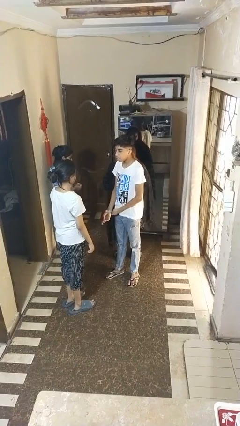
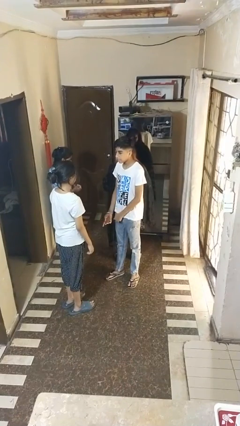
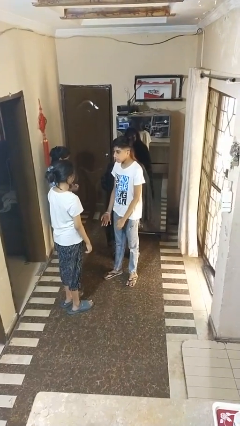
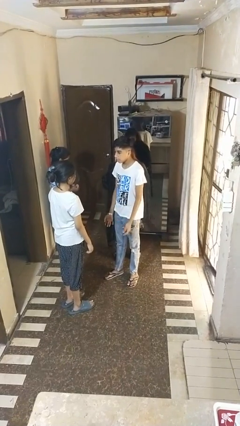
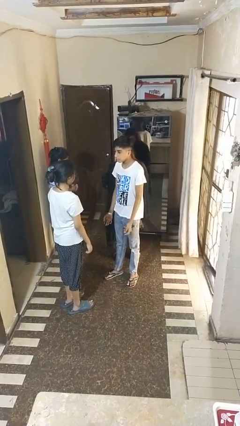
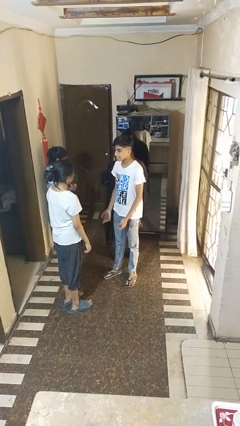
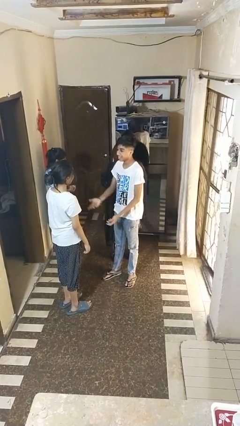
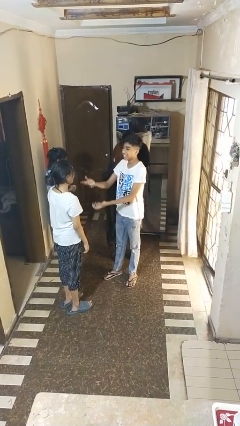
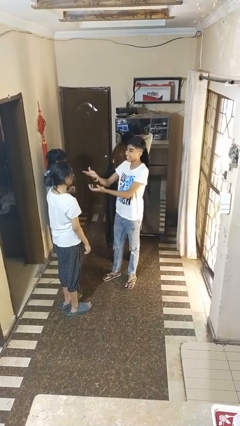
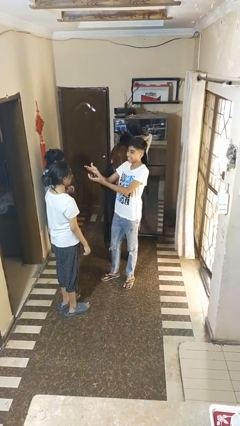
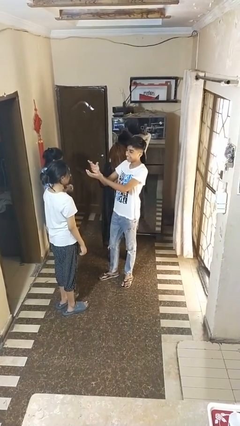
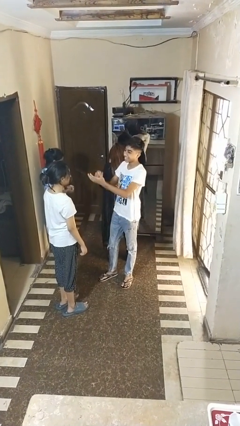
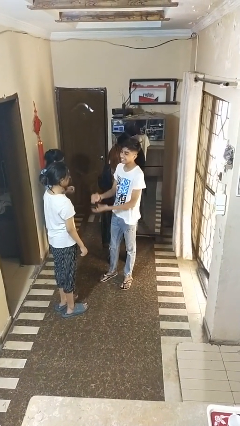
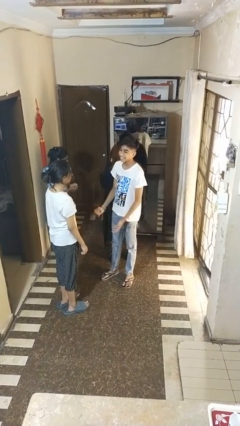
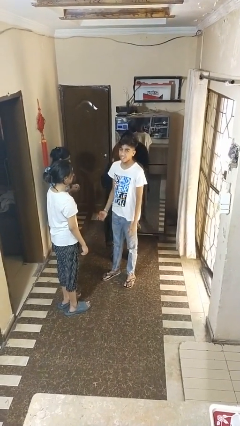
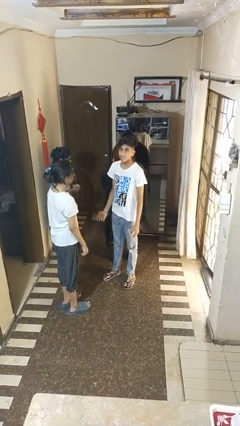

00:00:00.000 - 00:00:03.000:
person laughs with person

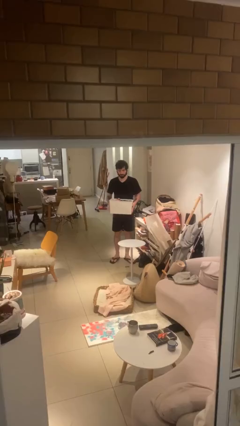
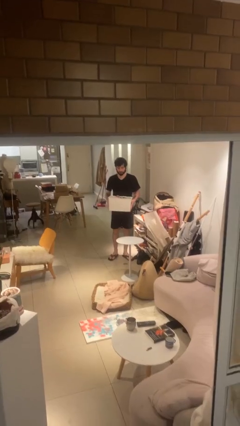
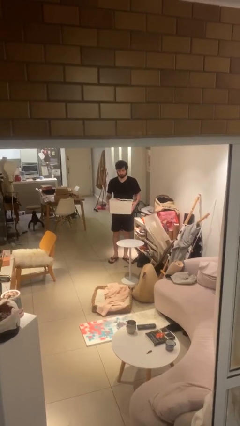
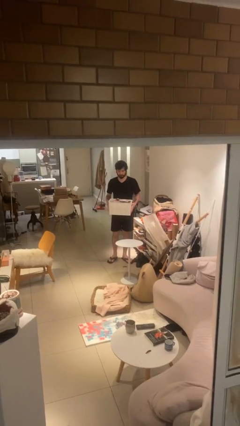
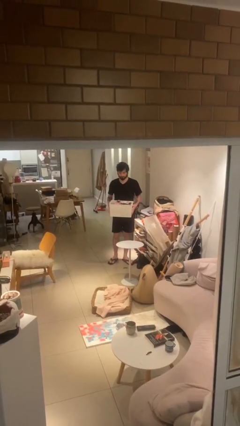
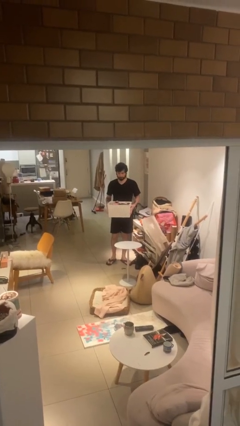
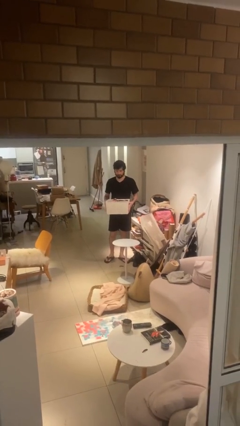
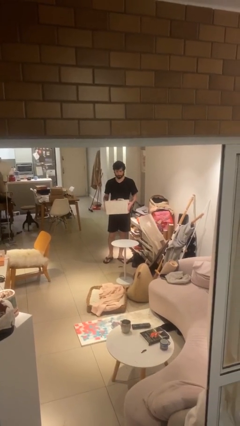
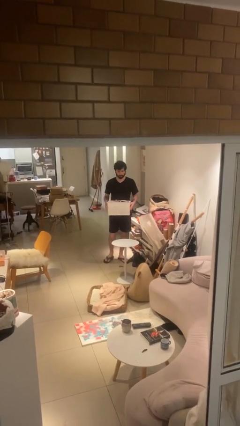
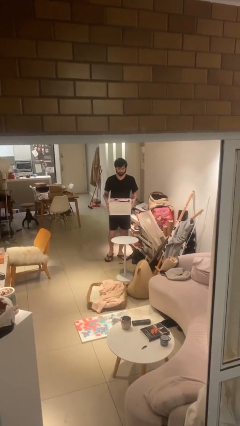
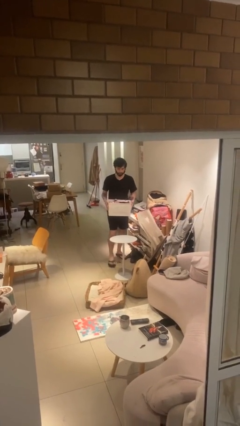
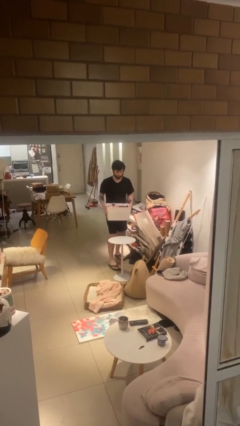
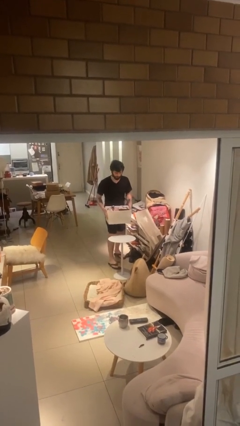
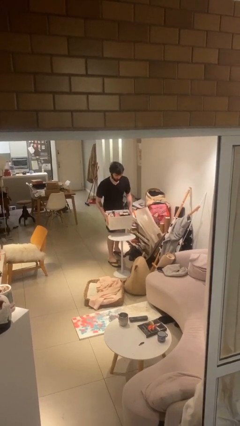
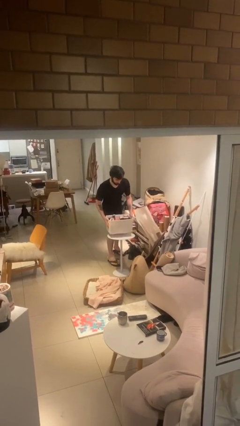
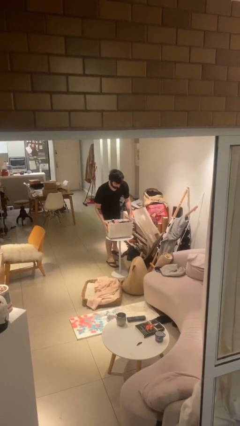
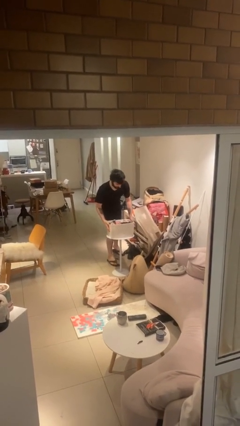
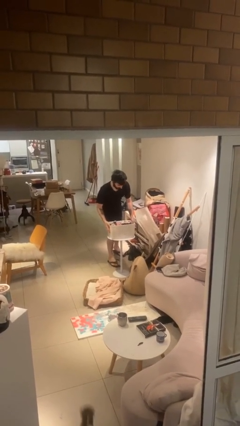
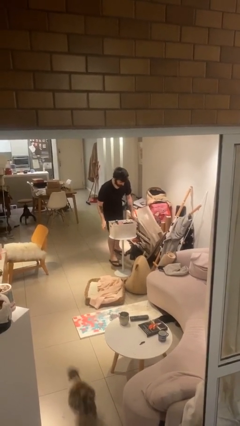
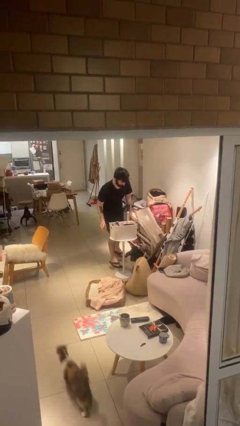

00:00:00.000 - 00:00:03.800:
person puts down object on table

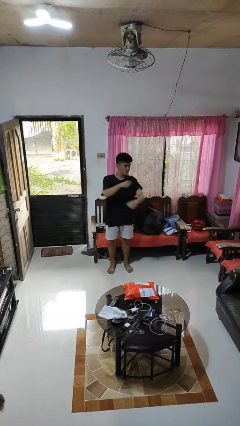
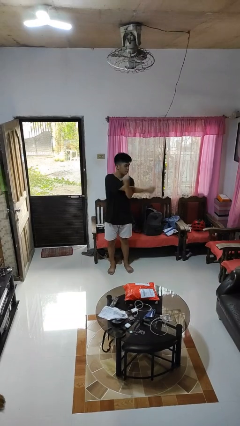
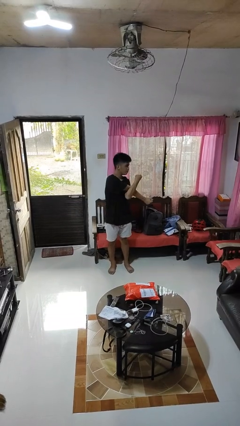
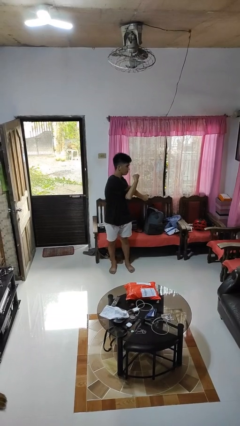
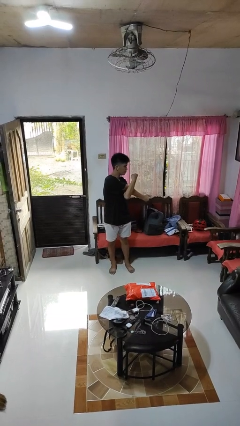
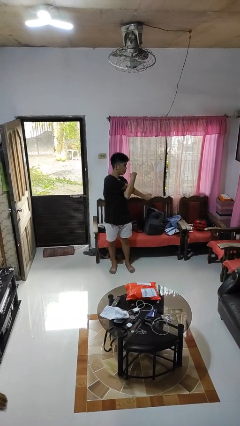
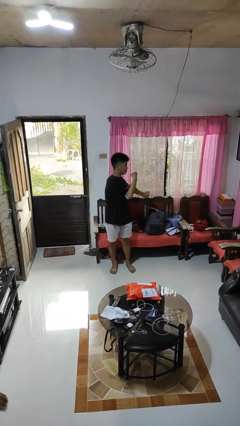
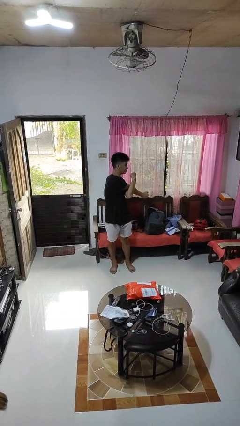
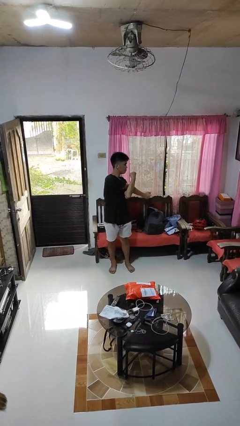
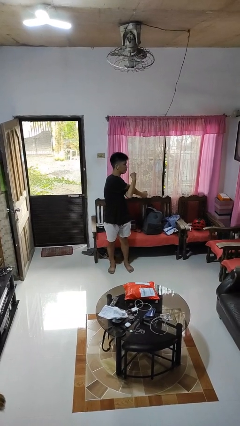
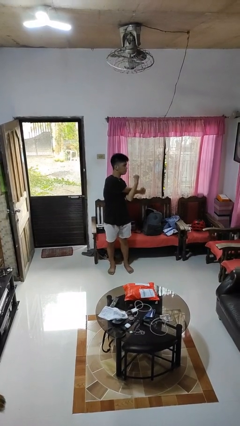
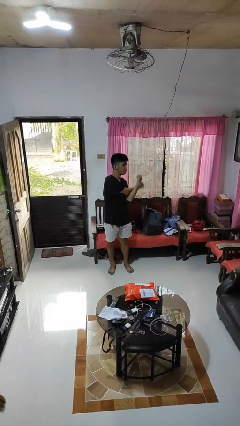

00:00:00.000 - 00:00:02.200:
person stretches arms to side

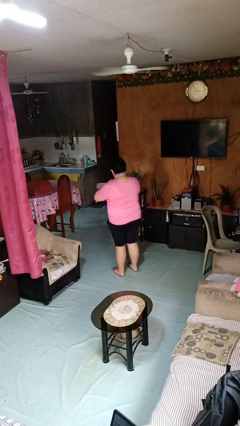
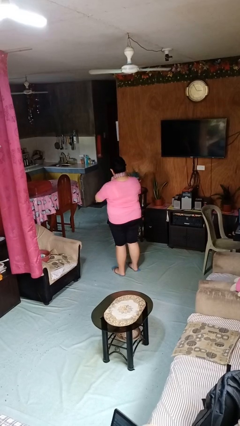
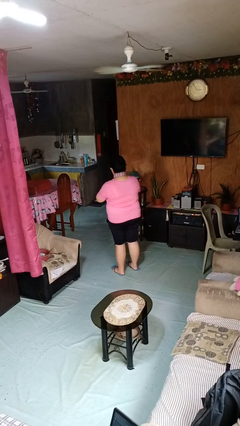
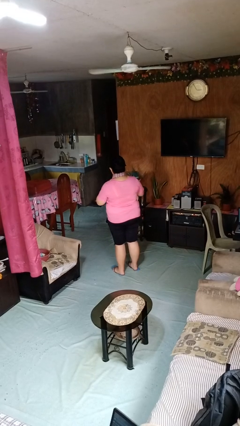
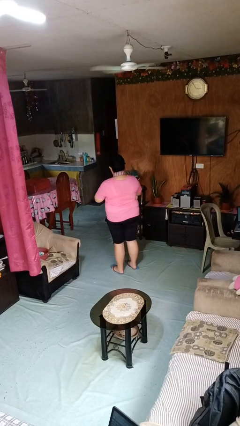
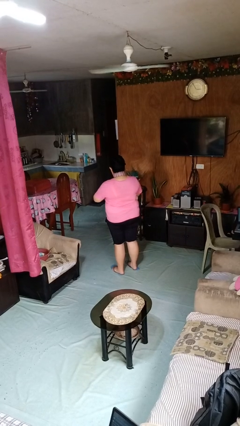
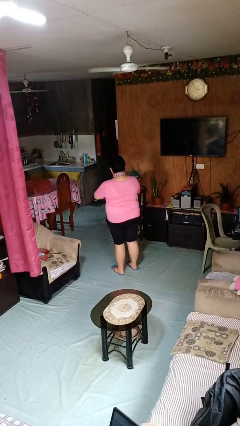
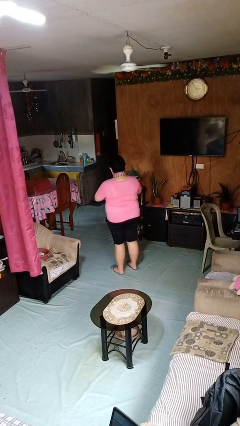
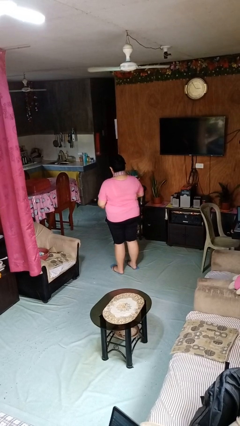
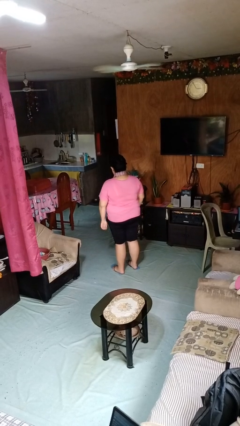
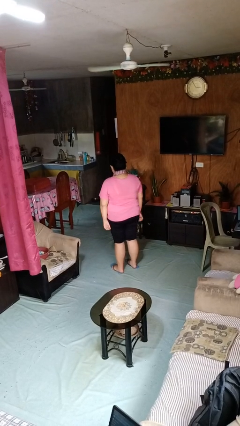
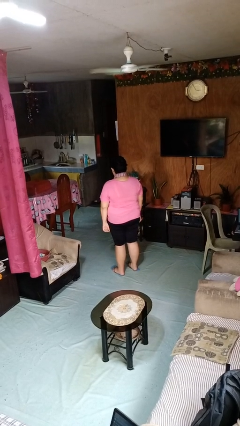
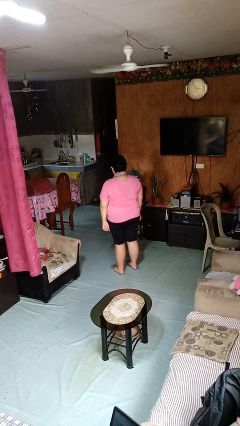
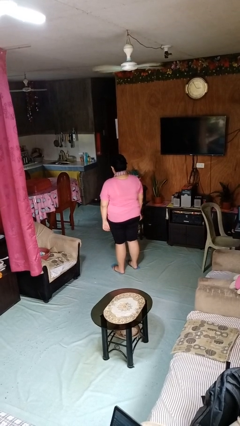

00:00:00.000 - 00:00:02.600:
person puts on necktie

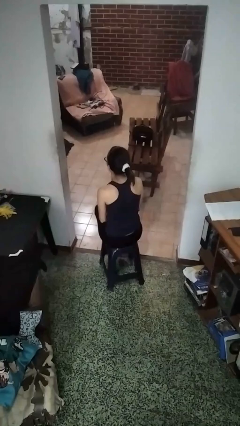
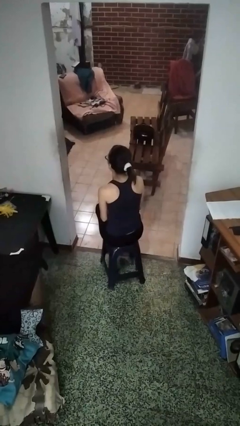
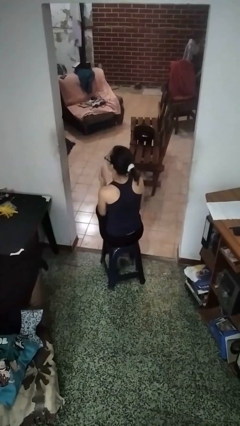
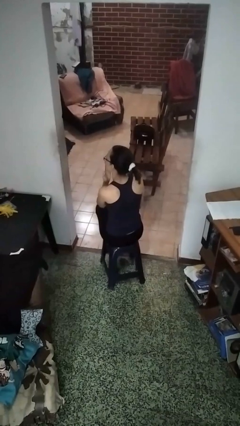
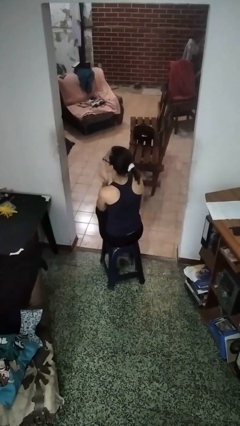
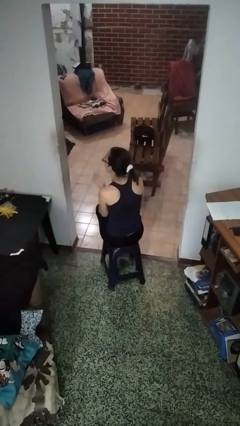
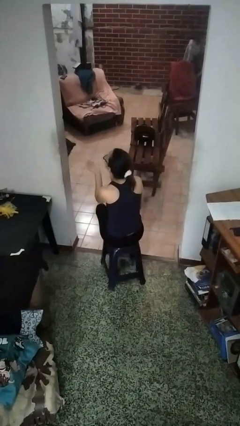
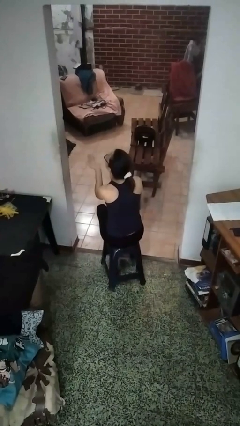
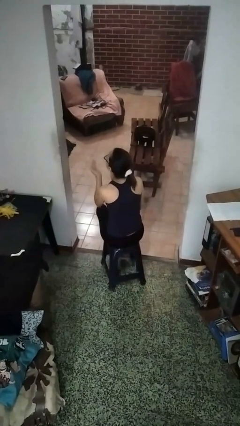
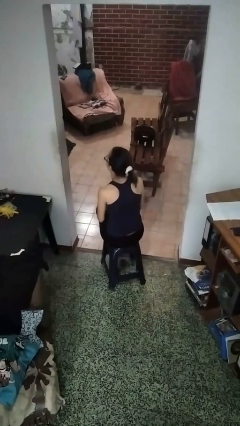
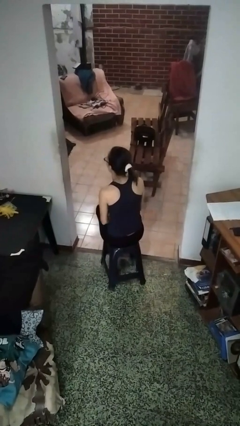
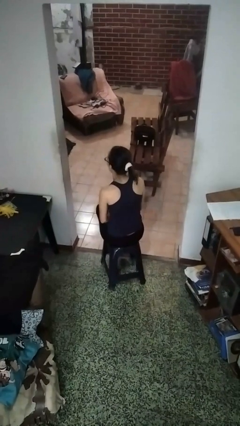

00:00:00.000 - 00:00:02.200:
person gestures blow kiss

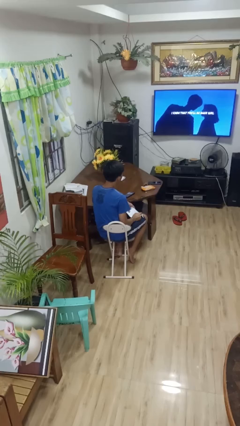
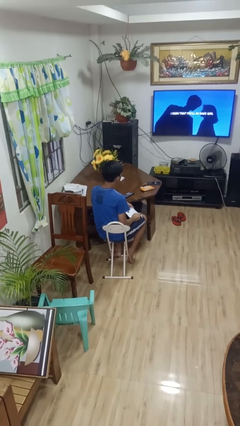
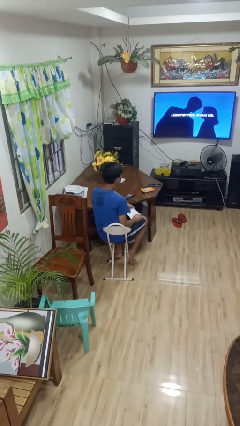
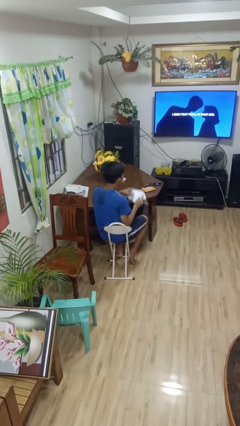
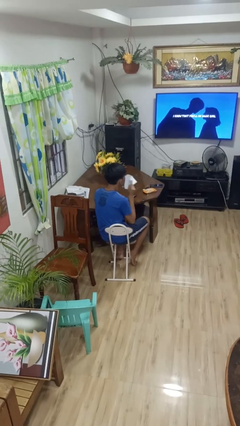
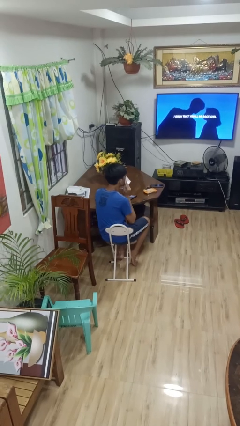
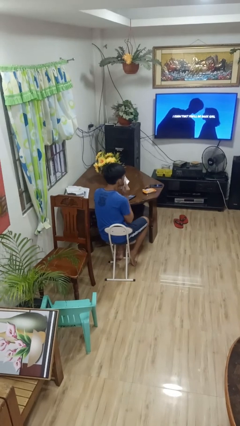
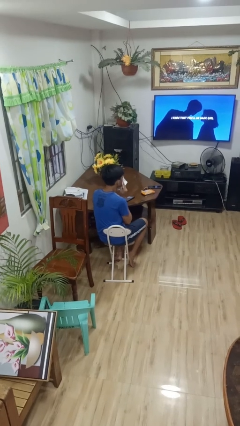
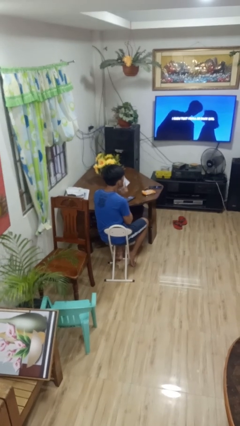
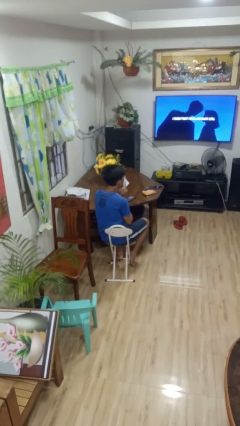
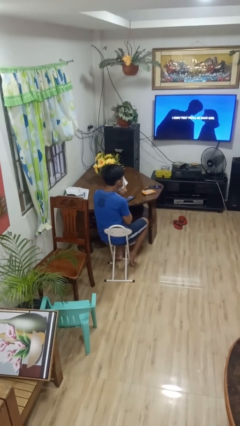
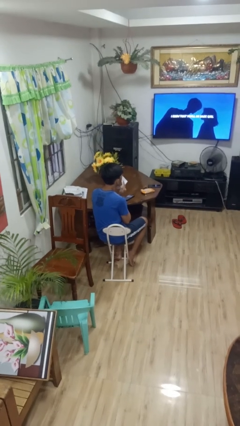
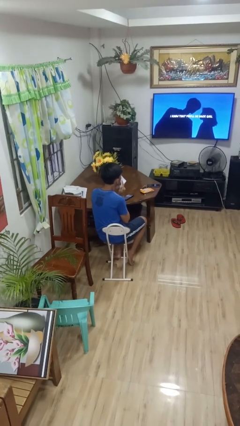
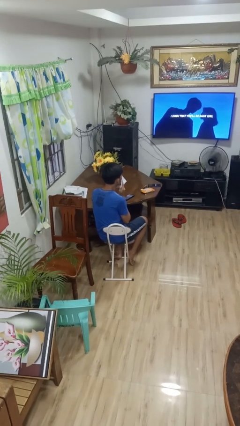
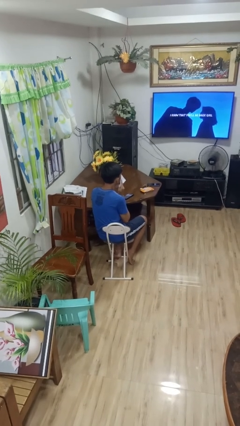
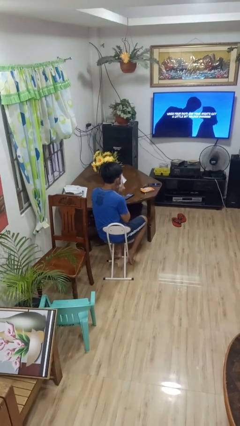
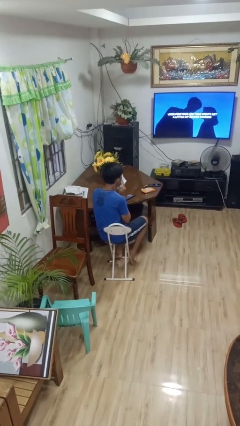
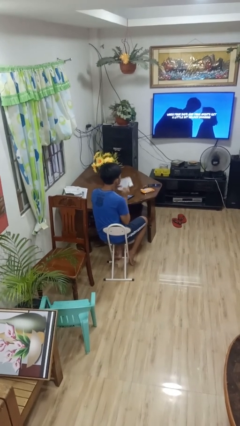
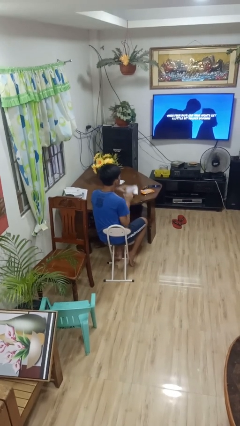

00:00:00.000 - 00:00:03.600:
person wipes mouth with napkin
